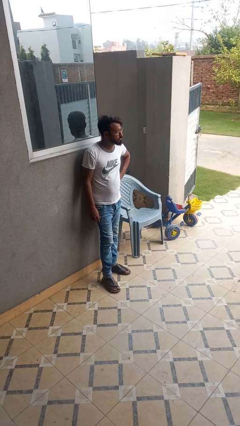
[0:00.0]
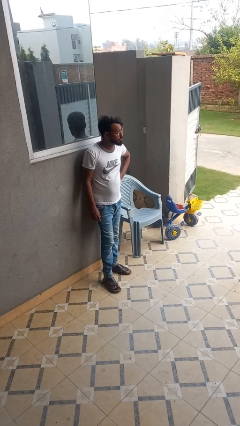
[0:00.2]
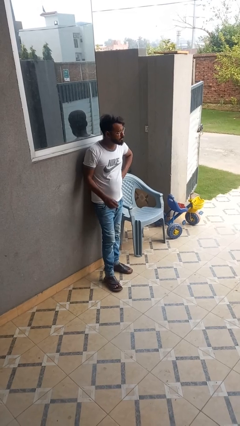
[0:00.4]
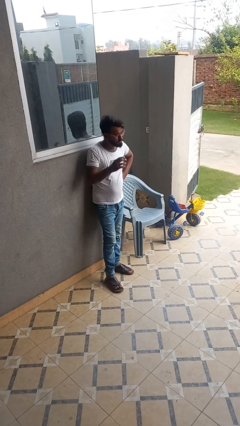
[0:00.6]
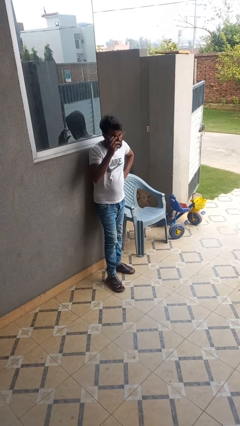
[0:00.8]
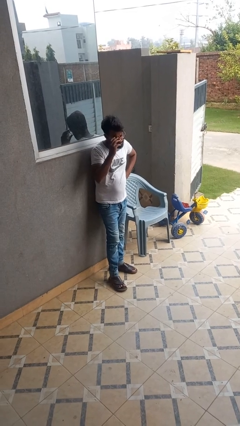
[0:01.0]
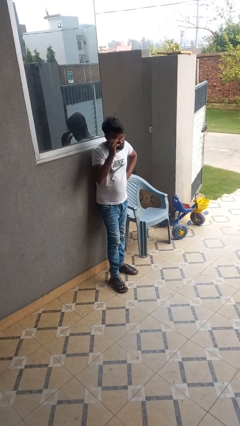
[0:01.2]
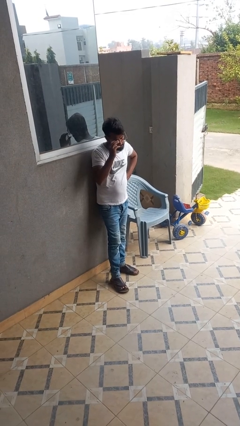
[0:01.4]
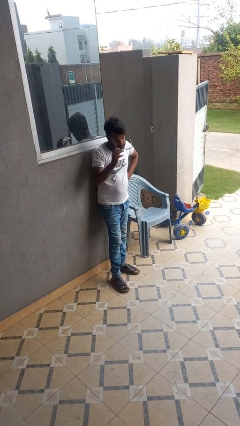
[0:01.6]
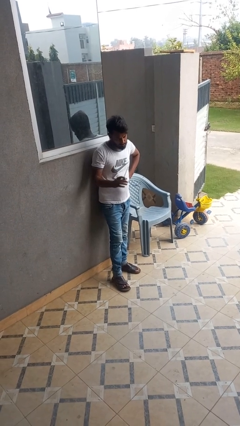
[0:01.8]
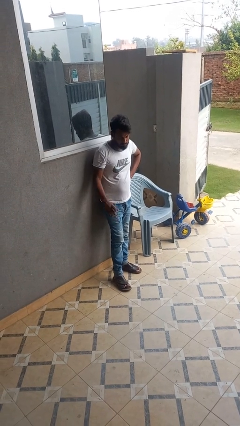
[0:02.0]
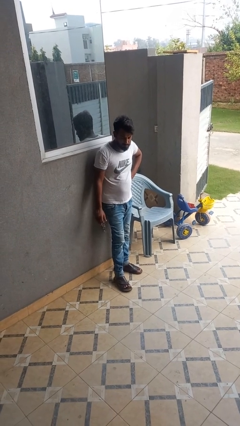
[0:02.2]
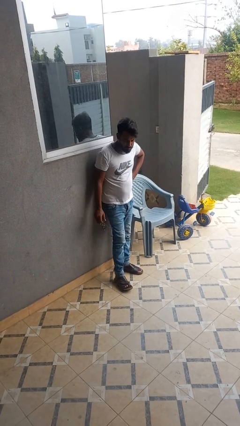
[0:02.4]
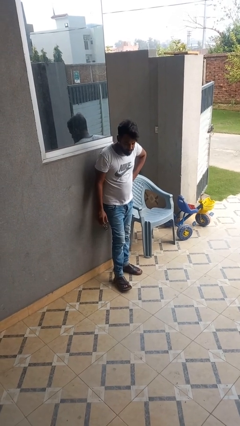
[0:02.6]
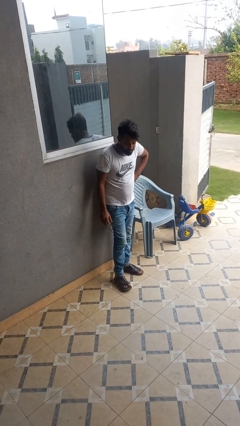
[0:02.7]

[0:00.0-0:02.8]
person takes off glasses

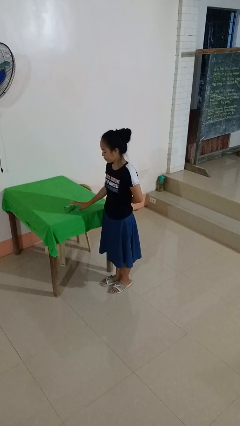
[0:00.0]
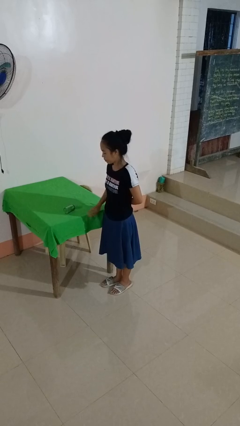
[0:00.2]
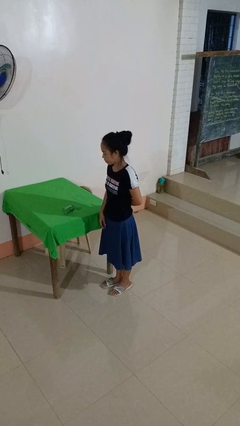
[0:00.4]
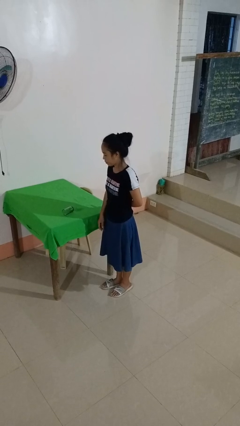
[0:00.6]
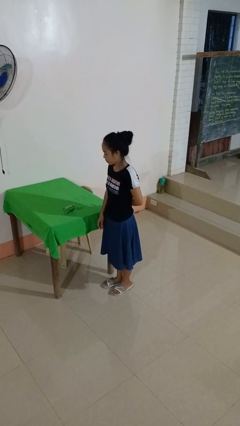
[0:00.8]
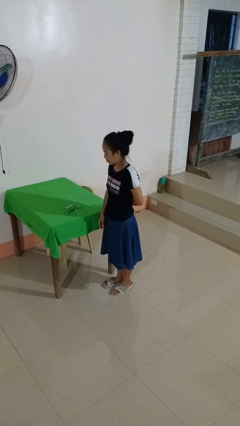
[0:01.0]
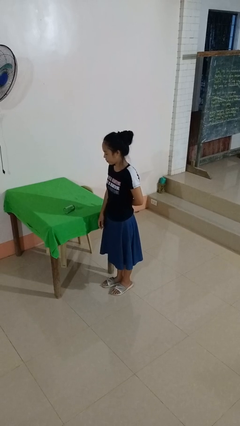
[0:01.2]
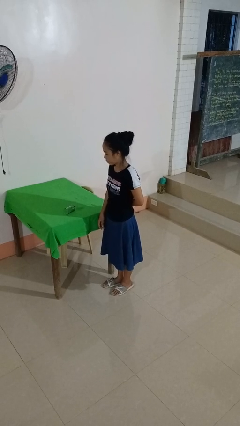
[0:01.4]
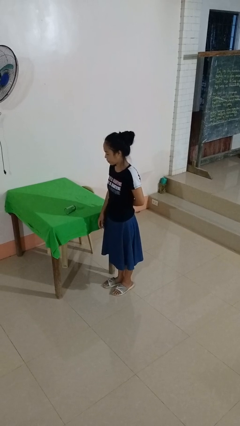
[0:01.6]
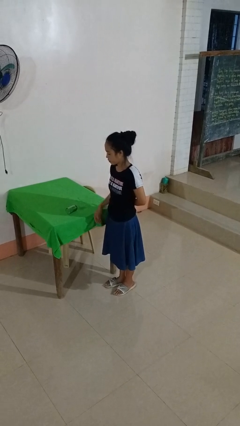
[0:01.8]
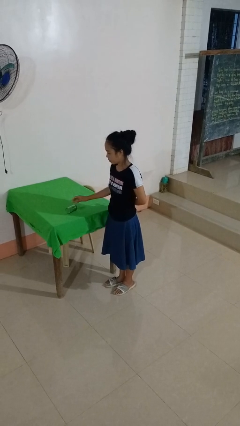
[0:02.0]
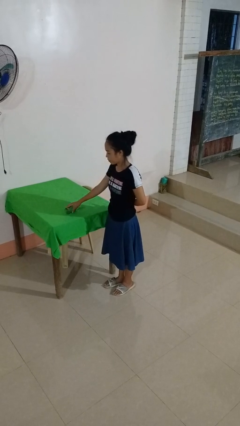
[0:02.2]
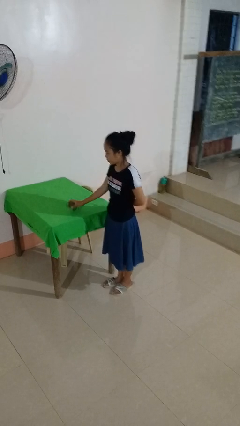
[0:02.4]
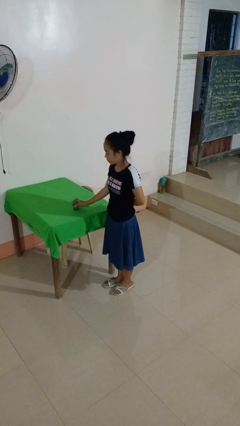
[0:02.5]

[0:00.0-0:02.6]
person knocks over glass

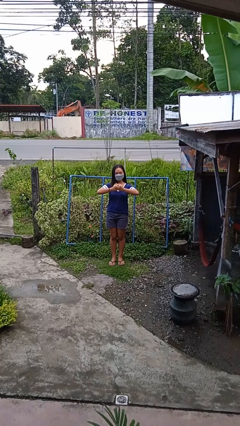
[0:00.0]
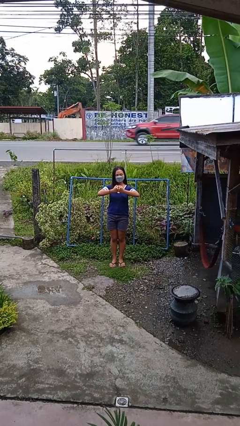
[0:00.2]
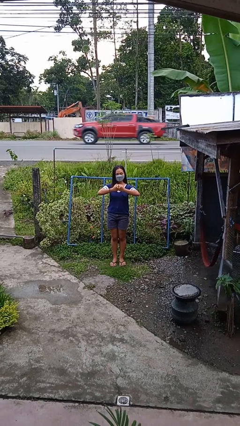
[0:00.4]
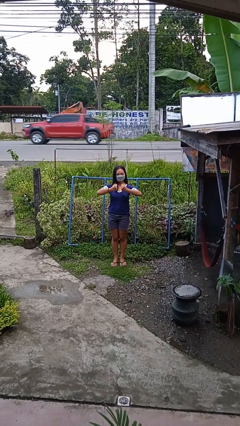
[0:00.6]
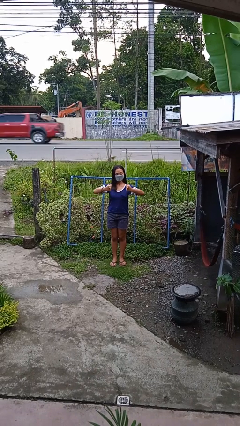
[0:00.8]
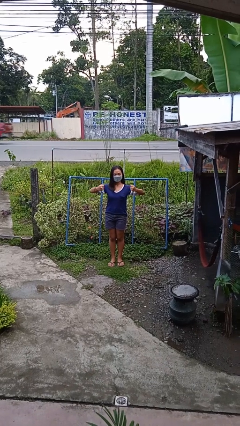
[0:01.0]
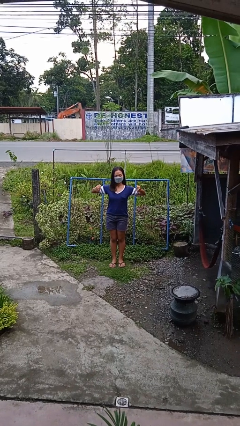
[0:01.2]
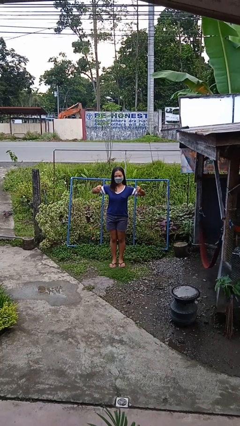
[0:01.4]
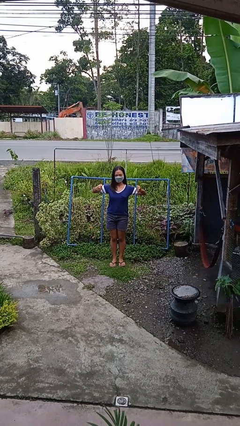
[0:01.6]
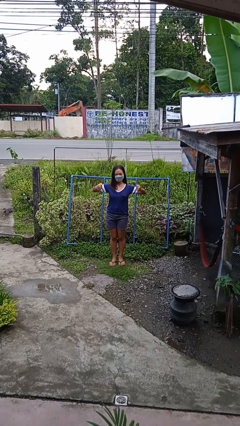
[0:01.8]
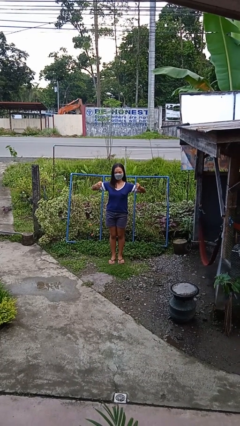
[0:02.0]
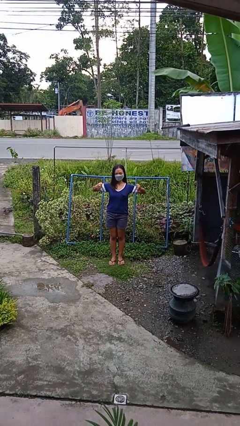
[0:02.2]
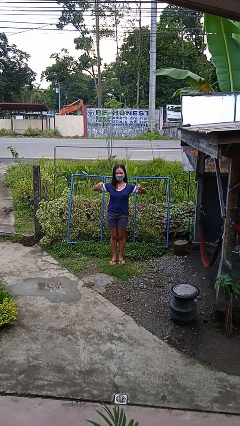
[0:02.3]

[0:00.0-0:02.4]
person gestures zoom in

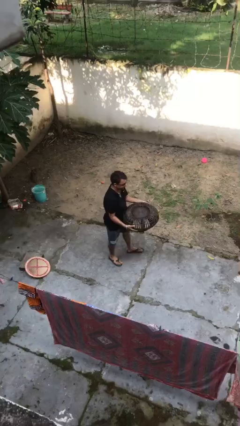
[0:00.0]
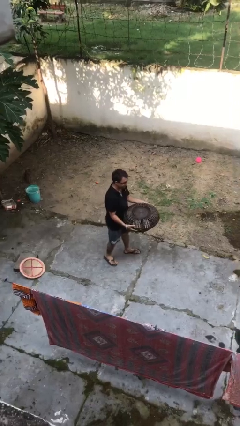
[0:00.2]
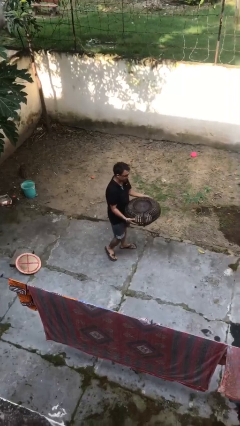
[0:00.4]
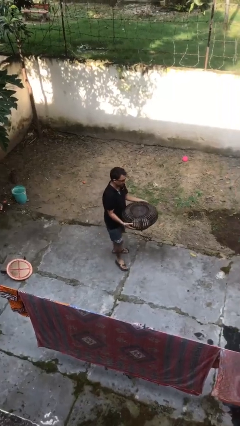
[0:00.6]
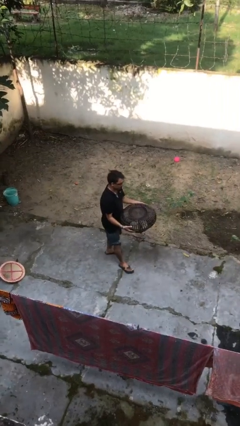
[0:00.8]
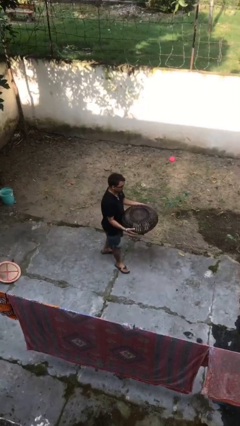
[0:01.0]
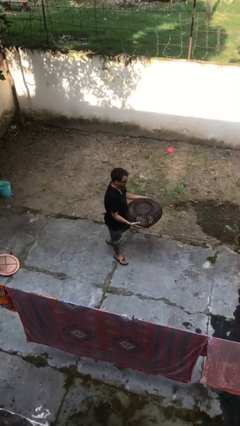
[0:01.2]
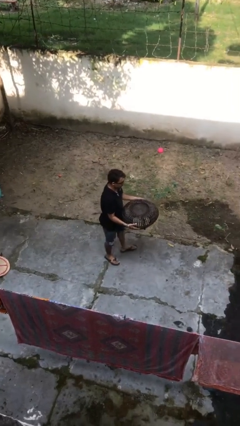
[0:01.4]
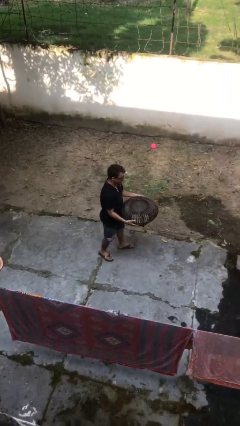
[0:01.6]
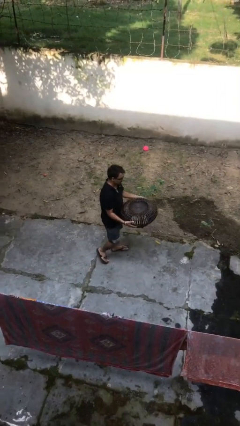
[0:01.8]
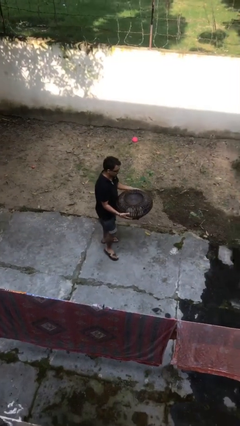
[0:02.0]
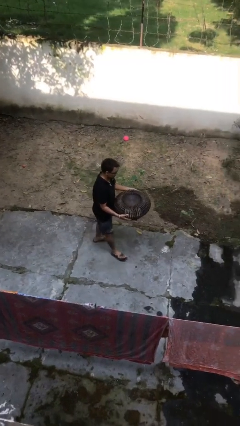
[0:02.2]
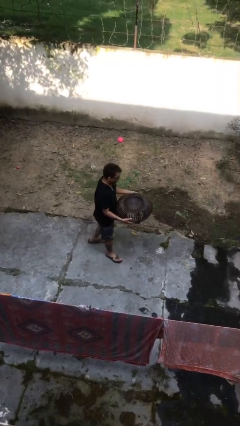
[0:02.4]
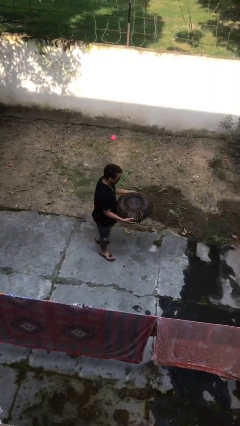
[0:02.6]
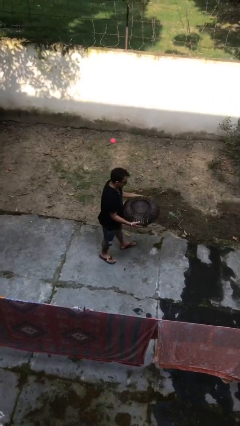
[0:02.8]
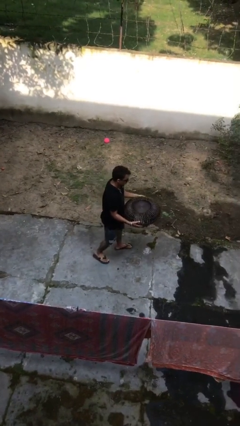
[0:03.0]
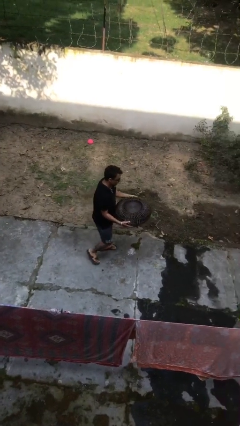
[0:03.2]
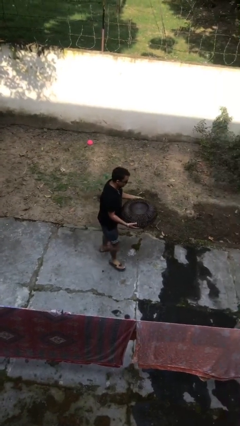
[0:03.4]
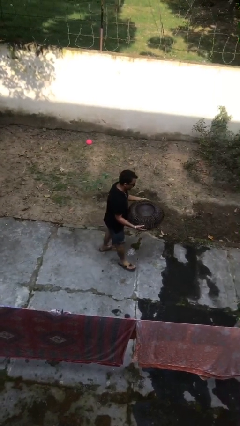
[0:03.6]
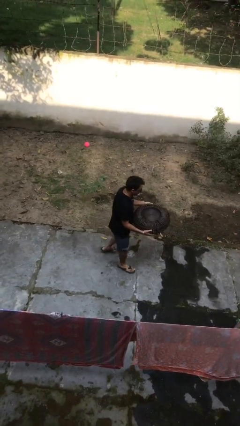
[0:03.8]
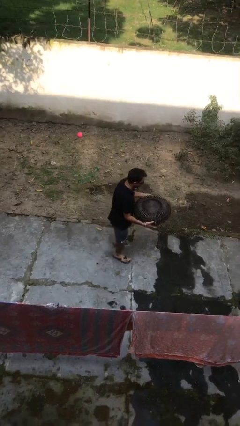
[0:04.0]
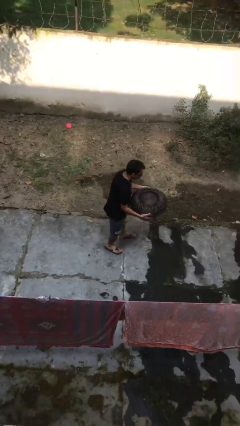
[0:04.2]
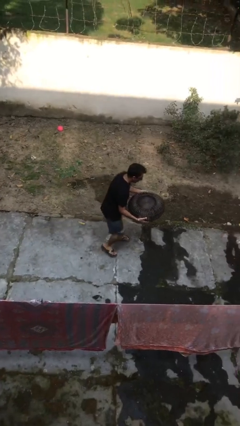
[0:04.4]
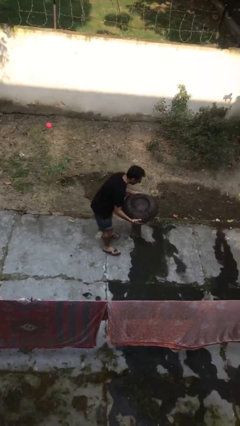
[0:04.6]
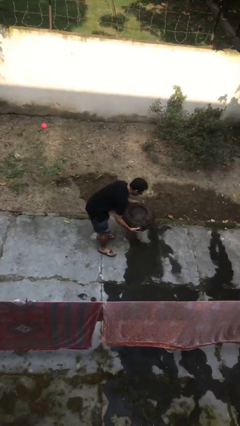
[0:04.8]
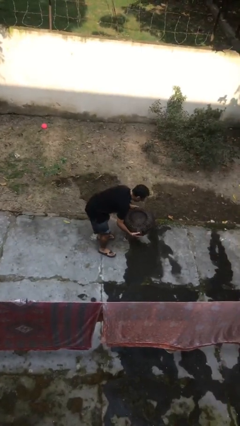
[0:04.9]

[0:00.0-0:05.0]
person carries heavy object

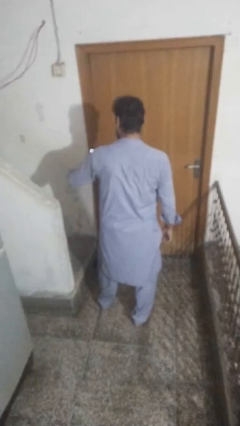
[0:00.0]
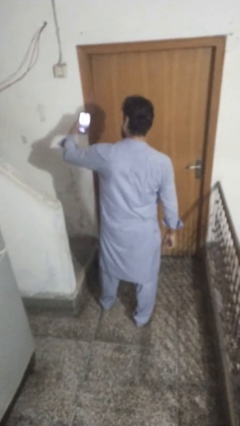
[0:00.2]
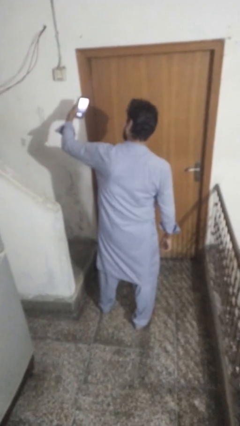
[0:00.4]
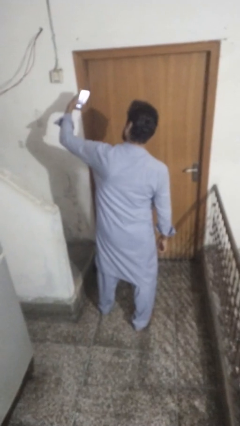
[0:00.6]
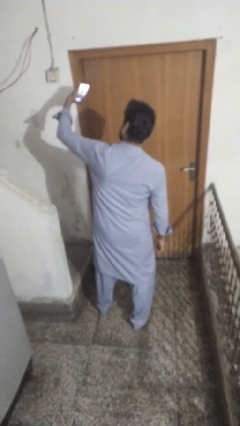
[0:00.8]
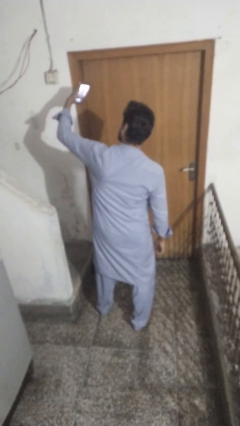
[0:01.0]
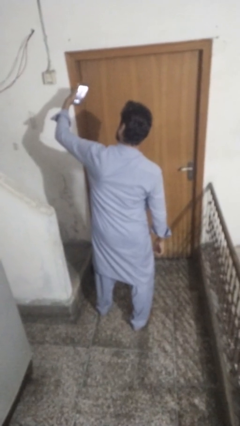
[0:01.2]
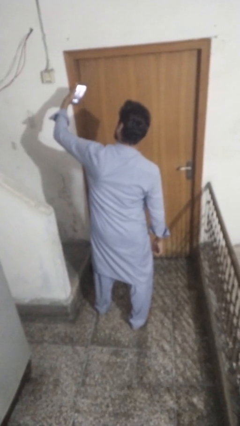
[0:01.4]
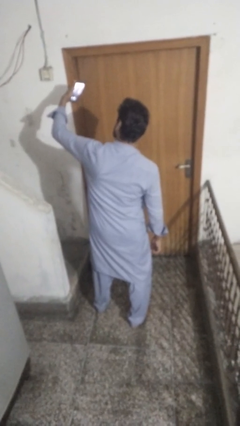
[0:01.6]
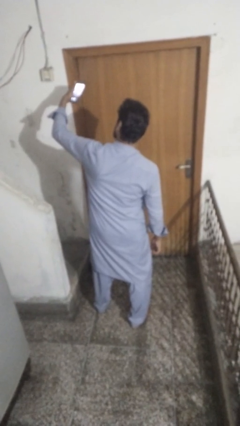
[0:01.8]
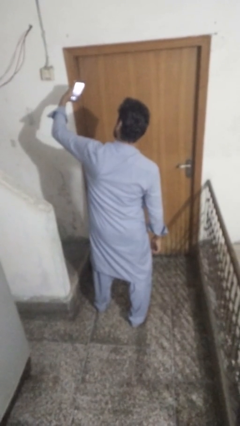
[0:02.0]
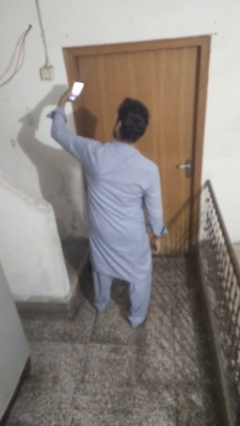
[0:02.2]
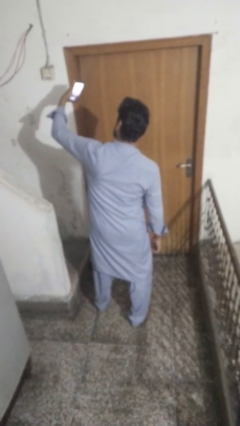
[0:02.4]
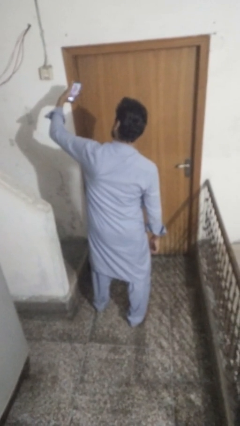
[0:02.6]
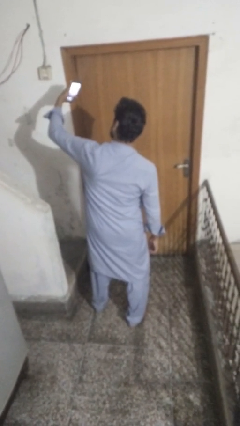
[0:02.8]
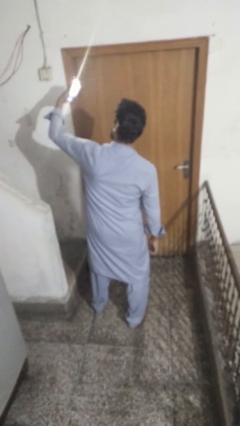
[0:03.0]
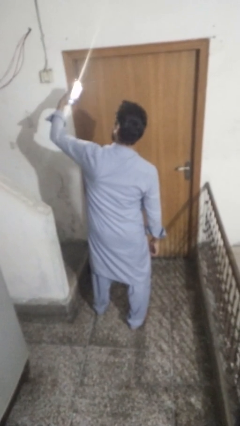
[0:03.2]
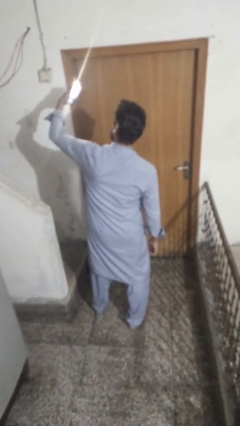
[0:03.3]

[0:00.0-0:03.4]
person takes selfie

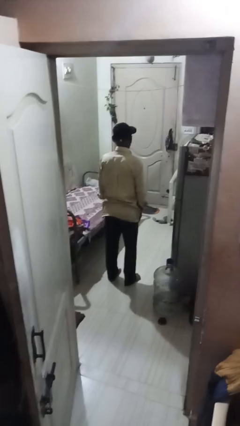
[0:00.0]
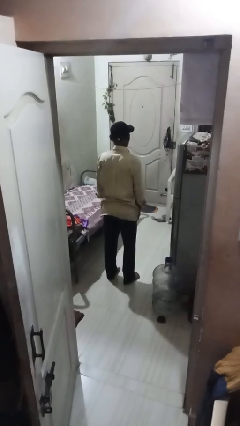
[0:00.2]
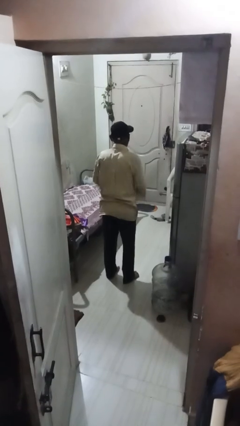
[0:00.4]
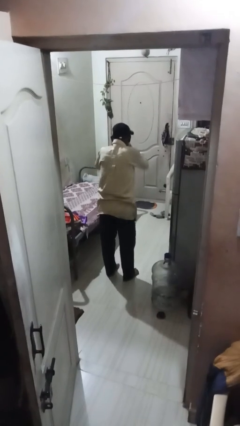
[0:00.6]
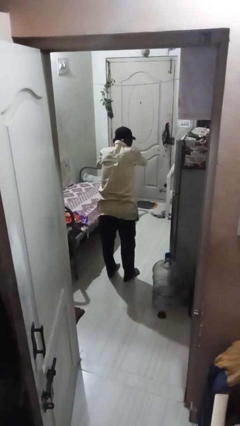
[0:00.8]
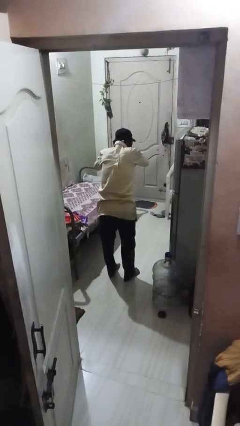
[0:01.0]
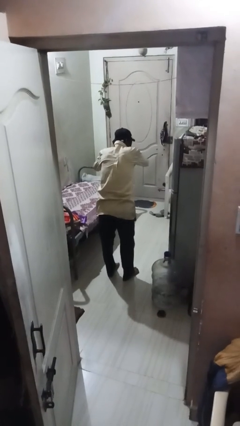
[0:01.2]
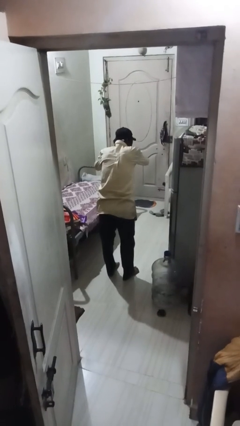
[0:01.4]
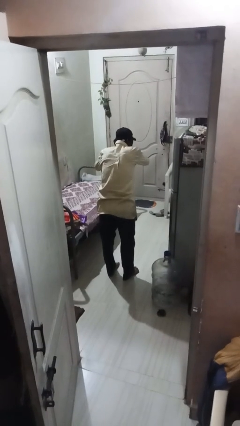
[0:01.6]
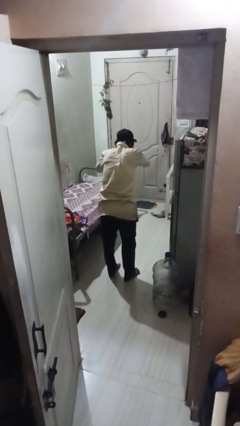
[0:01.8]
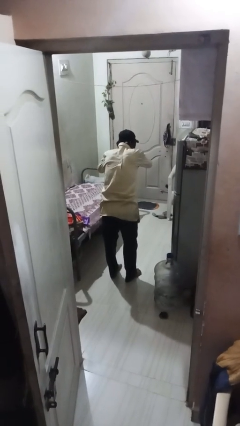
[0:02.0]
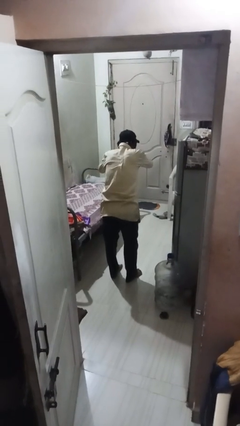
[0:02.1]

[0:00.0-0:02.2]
person prays
